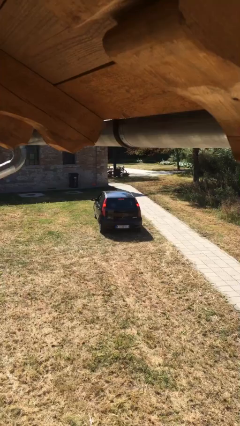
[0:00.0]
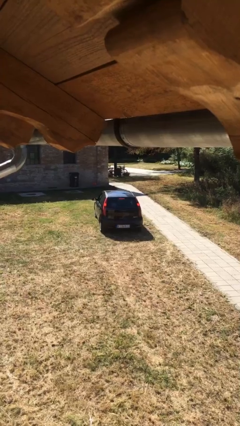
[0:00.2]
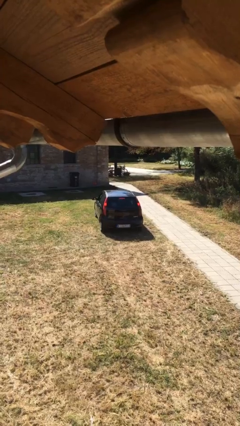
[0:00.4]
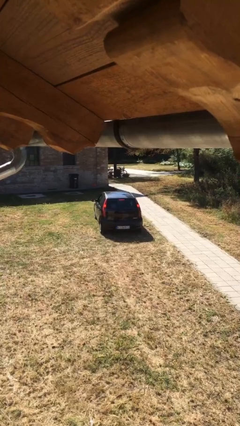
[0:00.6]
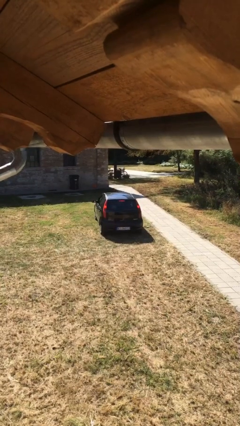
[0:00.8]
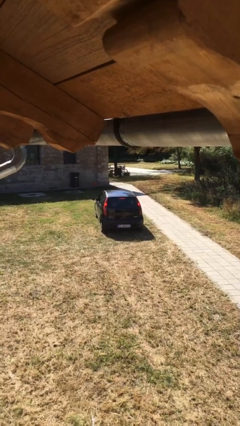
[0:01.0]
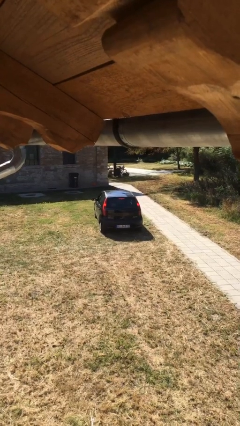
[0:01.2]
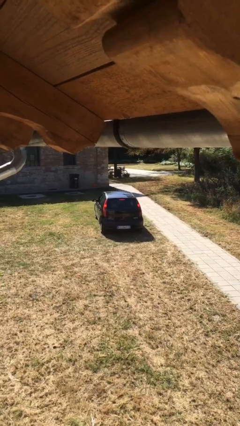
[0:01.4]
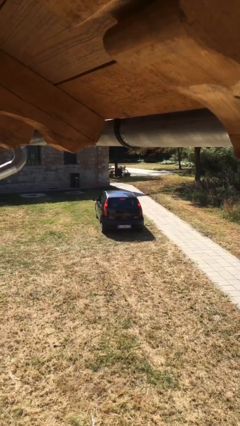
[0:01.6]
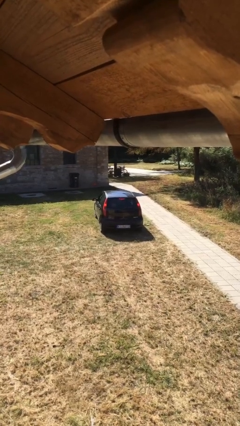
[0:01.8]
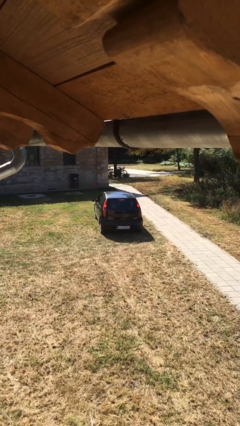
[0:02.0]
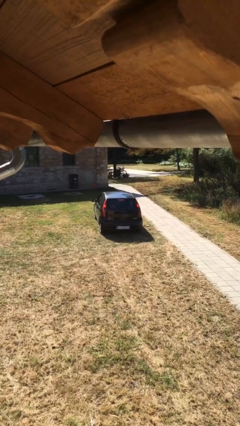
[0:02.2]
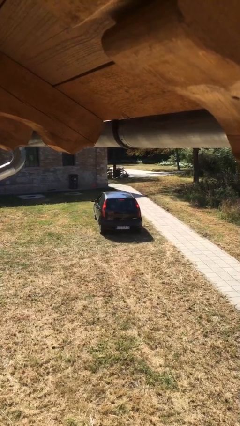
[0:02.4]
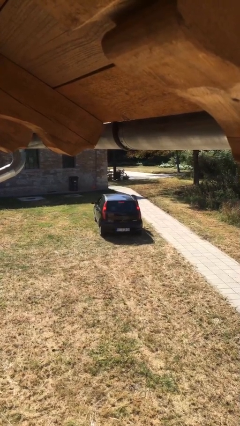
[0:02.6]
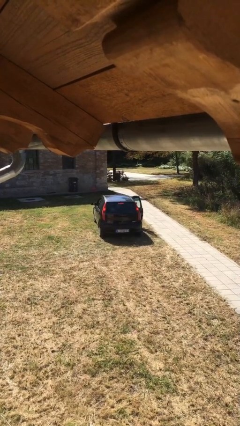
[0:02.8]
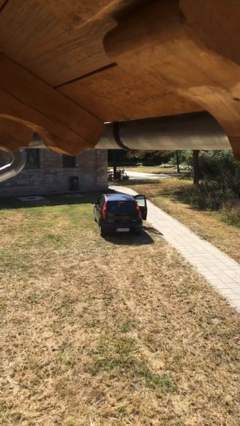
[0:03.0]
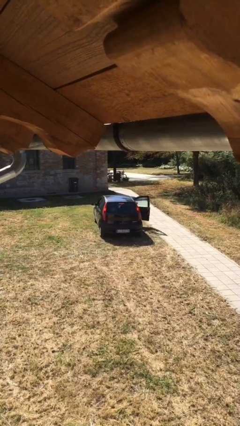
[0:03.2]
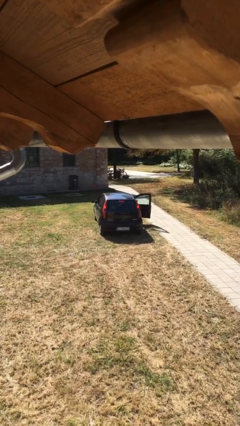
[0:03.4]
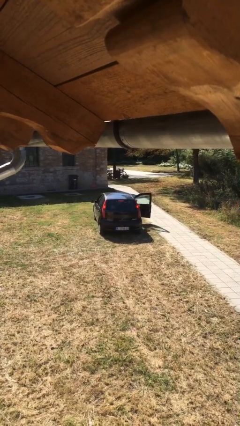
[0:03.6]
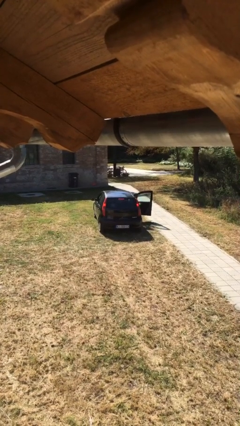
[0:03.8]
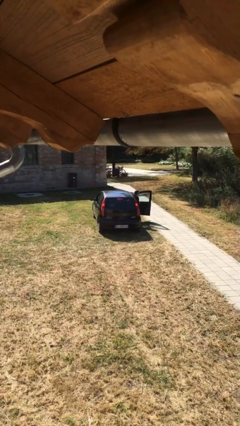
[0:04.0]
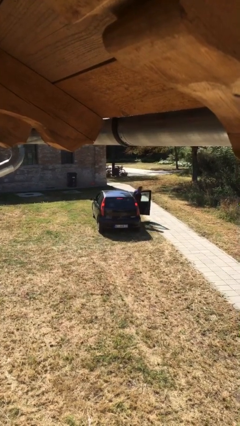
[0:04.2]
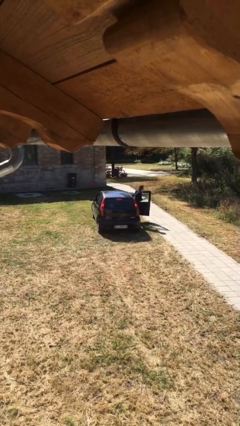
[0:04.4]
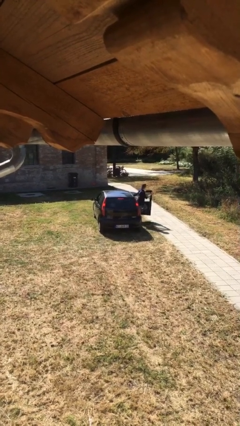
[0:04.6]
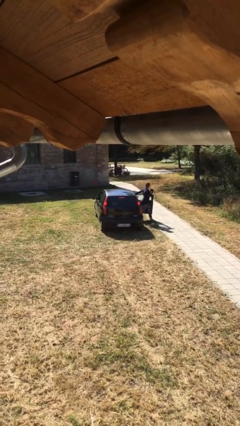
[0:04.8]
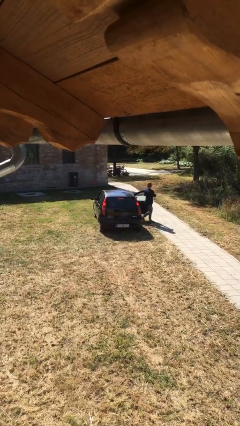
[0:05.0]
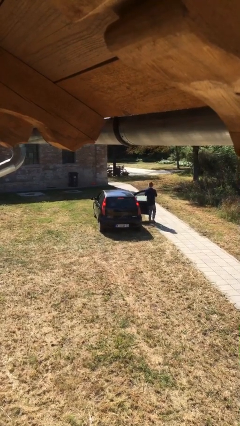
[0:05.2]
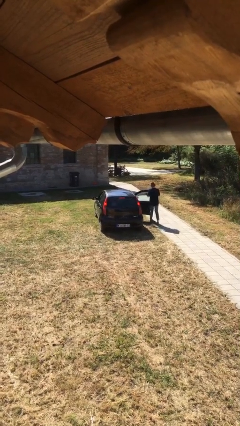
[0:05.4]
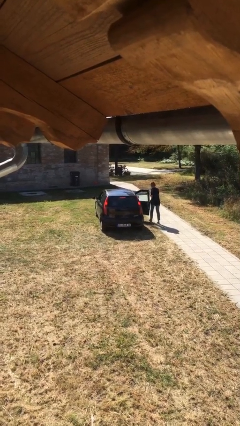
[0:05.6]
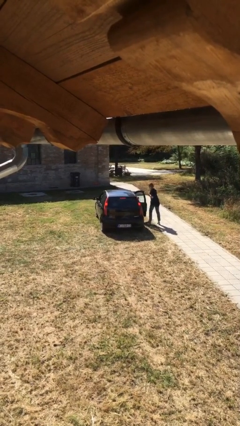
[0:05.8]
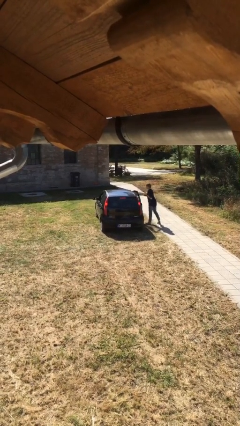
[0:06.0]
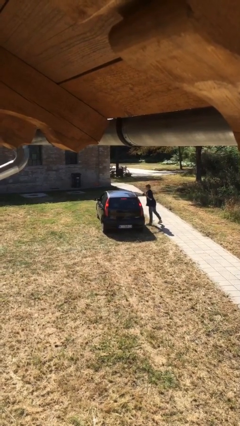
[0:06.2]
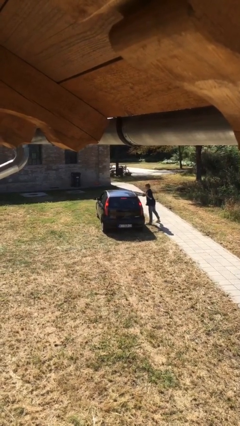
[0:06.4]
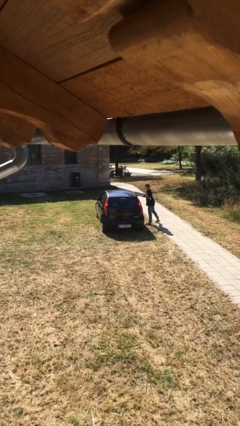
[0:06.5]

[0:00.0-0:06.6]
car drops off person

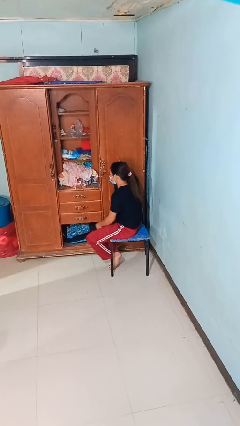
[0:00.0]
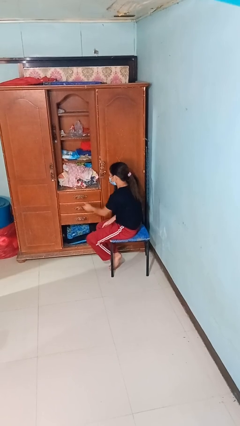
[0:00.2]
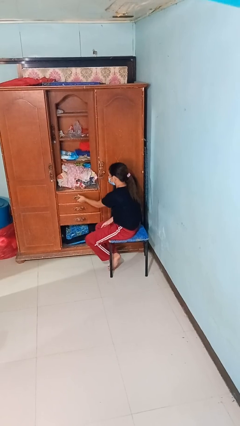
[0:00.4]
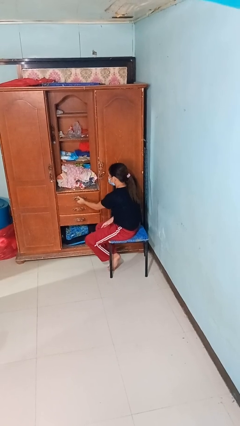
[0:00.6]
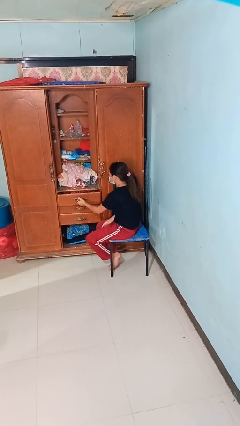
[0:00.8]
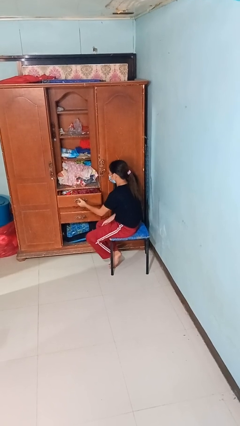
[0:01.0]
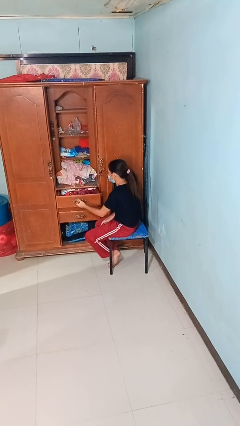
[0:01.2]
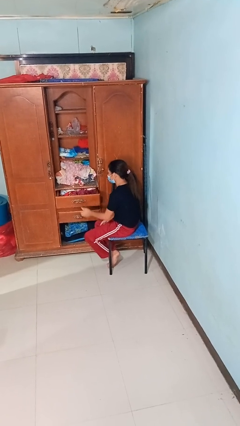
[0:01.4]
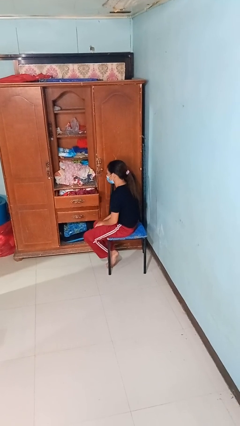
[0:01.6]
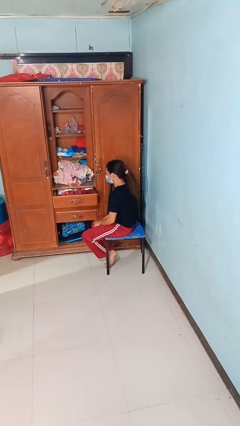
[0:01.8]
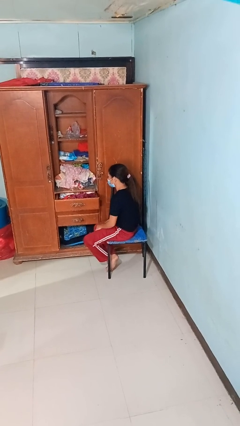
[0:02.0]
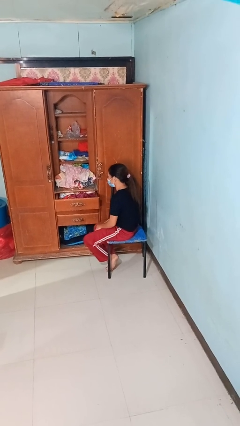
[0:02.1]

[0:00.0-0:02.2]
person opens dresser drawer

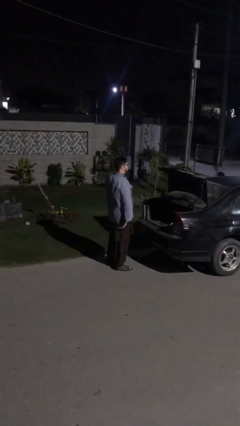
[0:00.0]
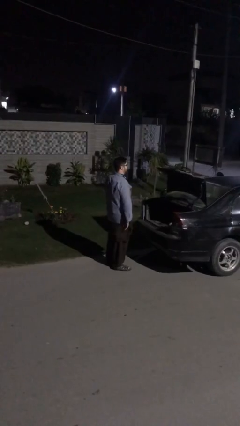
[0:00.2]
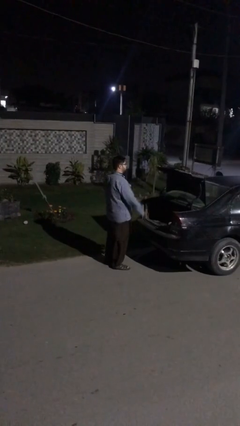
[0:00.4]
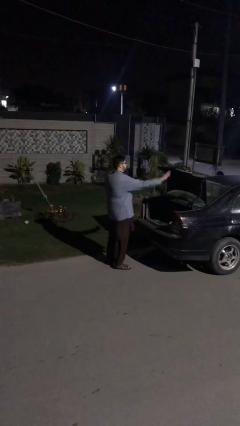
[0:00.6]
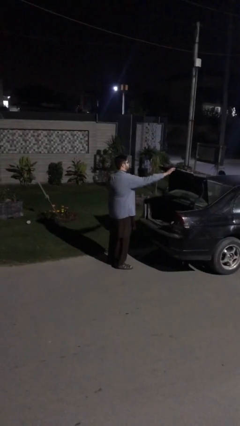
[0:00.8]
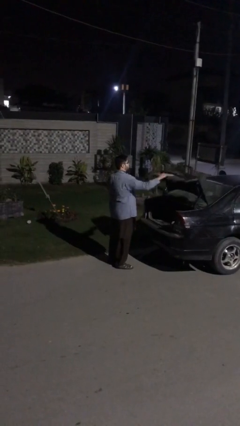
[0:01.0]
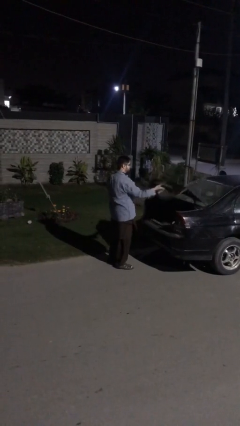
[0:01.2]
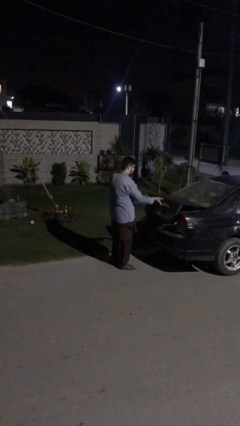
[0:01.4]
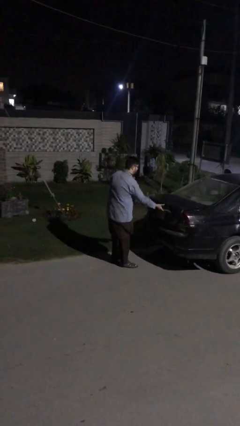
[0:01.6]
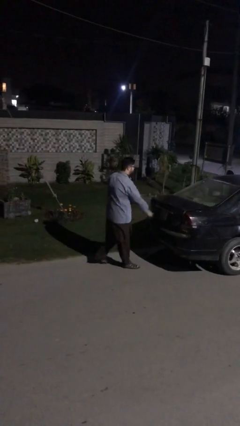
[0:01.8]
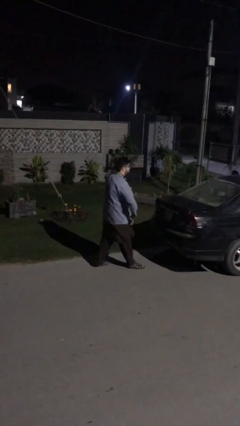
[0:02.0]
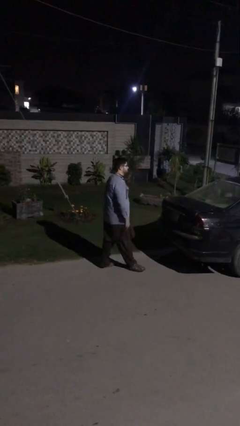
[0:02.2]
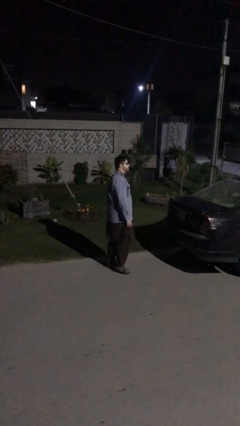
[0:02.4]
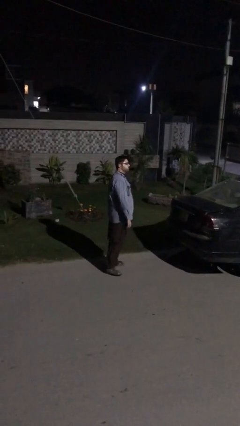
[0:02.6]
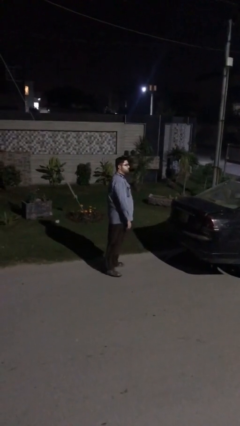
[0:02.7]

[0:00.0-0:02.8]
person closes car trunk

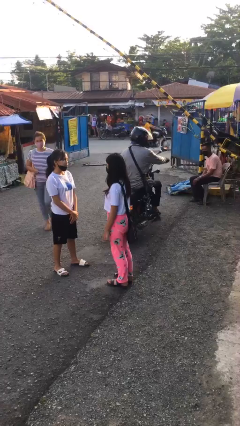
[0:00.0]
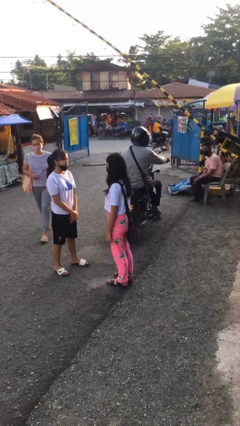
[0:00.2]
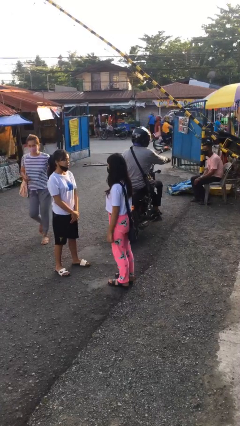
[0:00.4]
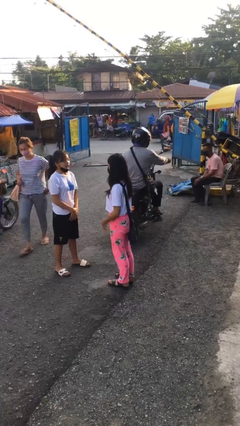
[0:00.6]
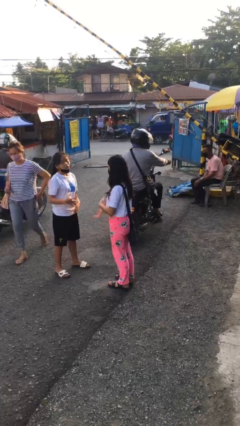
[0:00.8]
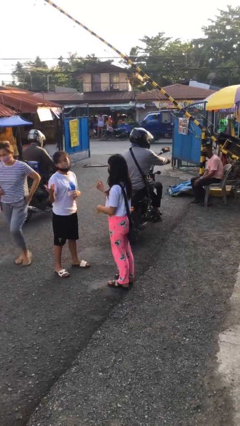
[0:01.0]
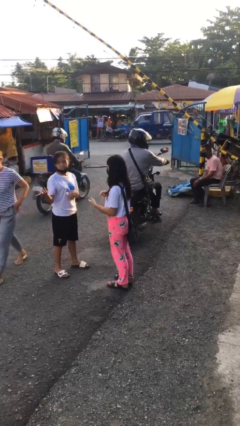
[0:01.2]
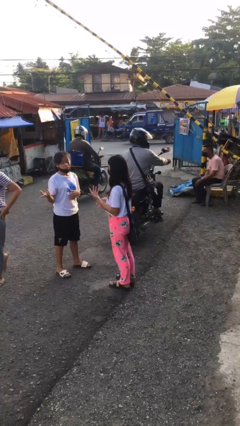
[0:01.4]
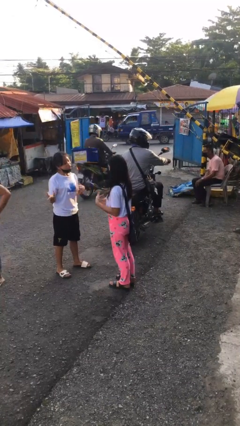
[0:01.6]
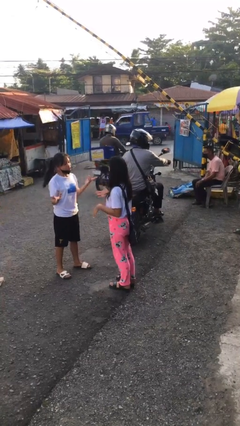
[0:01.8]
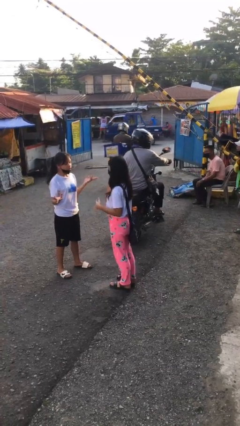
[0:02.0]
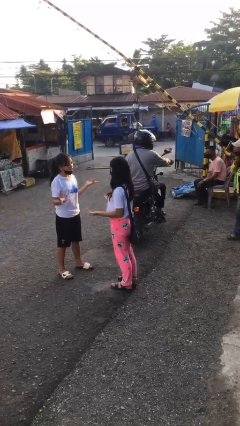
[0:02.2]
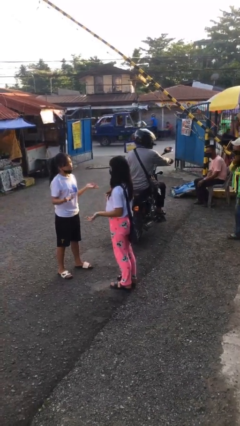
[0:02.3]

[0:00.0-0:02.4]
person talks to person

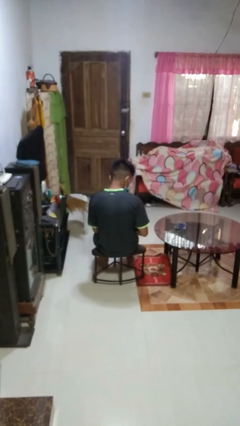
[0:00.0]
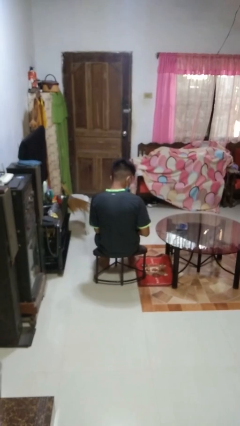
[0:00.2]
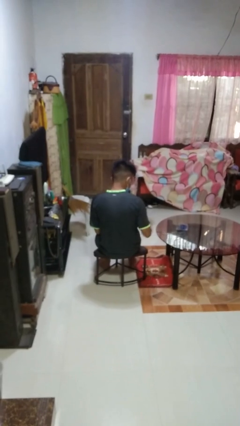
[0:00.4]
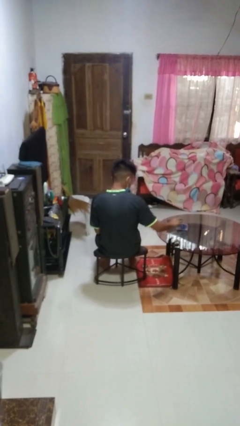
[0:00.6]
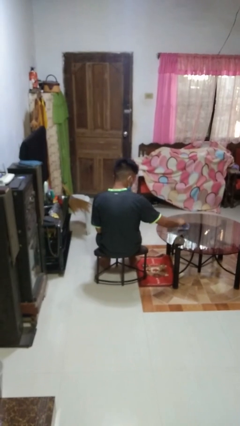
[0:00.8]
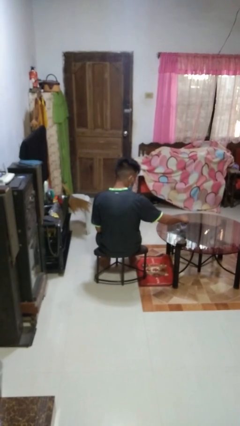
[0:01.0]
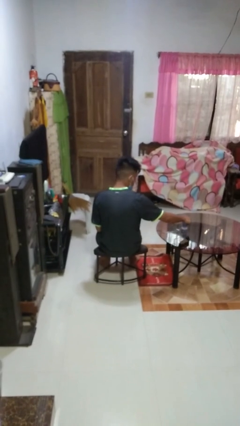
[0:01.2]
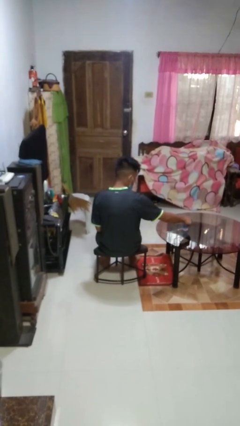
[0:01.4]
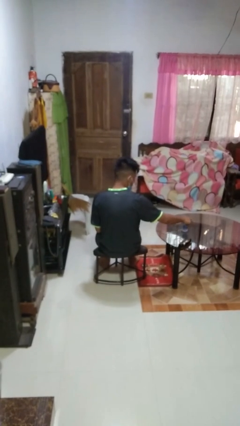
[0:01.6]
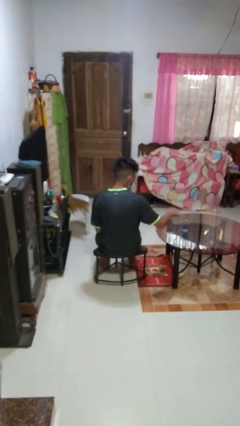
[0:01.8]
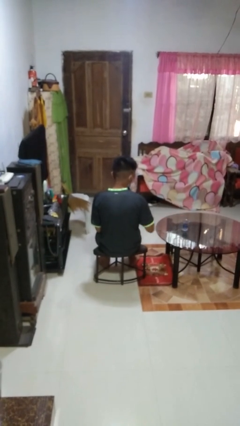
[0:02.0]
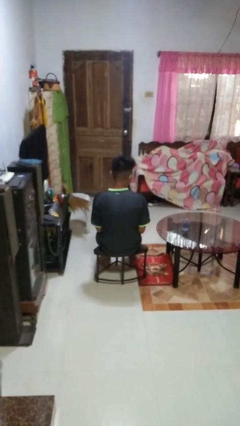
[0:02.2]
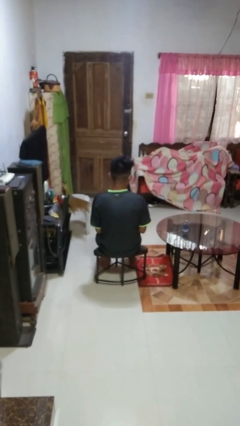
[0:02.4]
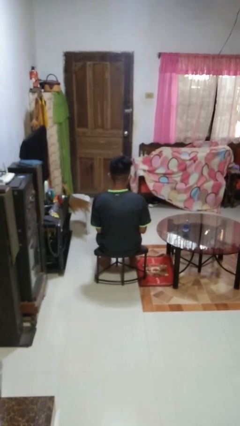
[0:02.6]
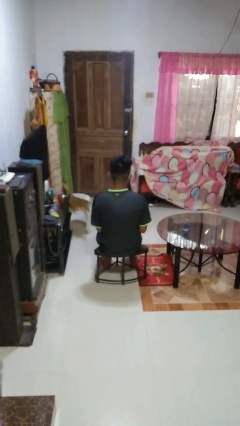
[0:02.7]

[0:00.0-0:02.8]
person sets upright glass

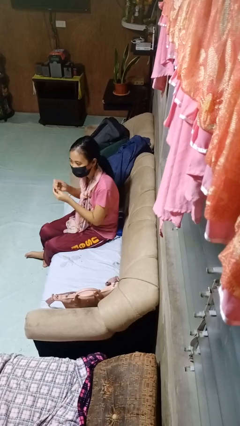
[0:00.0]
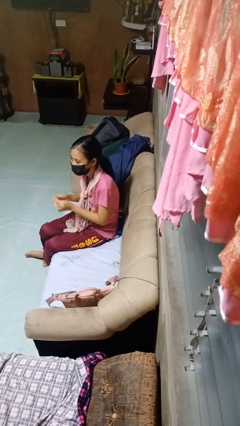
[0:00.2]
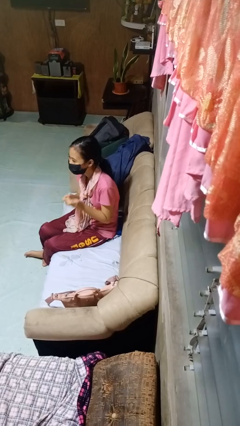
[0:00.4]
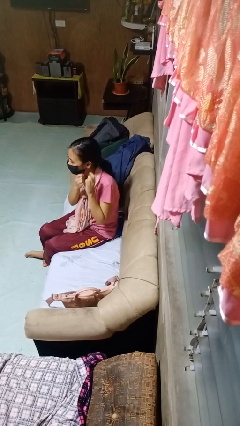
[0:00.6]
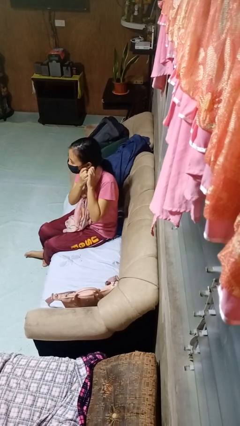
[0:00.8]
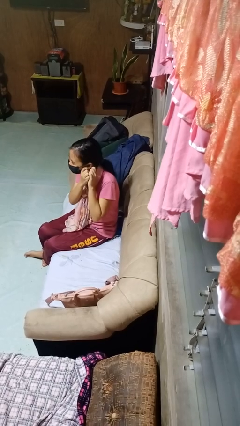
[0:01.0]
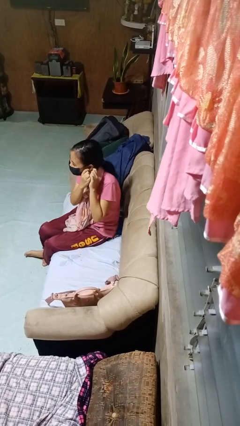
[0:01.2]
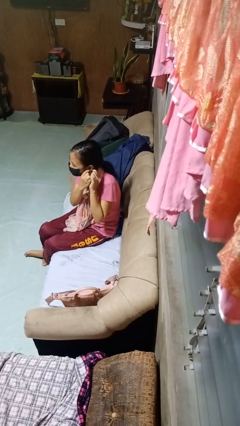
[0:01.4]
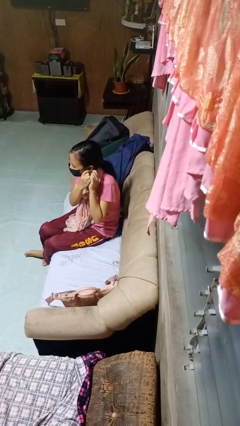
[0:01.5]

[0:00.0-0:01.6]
person takes off earrings
